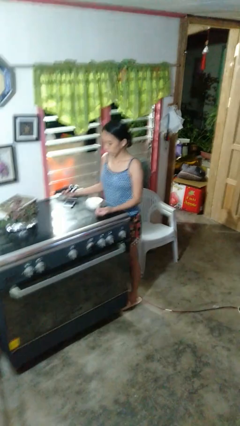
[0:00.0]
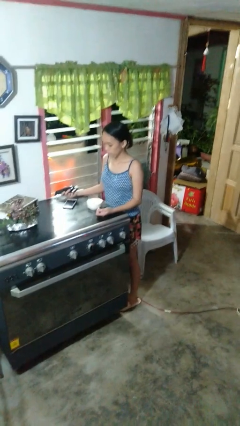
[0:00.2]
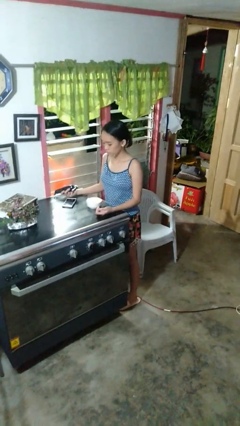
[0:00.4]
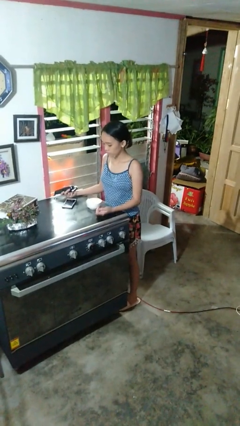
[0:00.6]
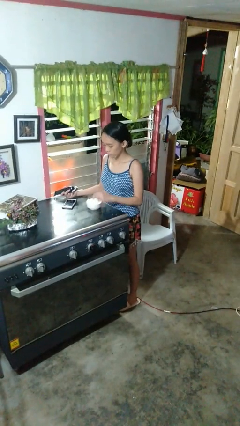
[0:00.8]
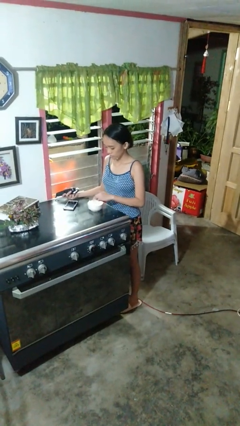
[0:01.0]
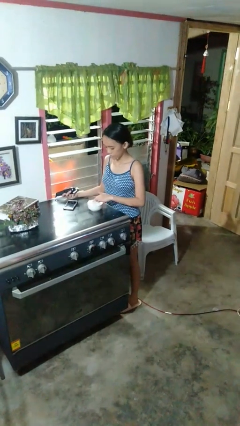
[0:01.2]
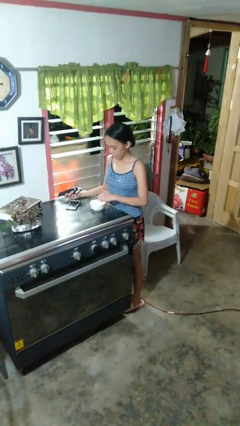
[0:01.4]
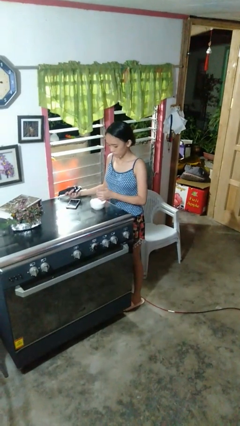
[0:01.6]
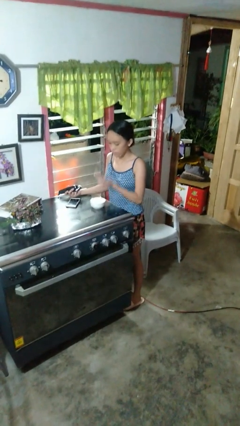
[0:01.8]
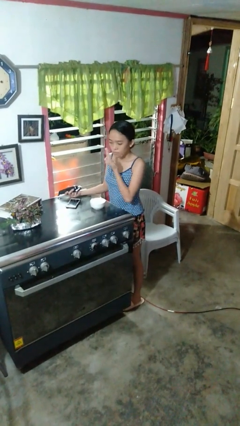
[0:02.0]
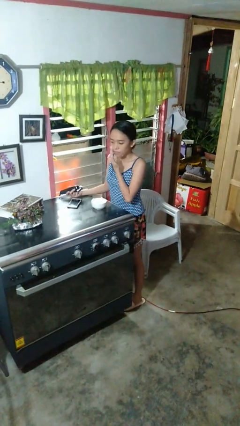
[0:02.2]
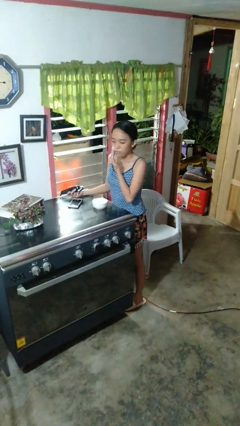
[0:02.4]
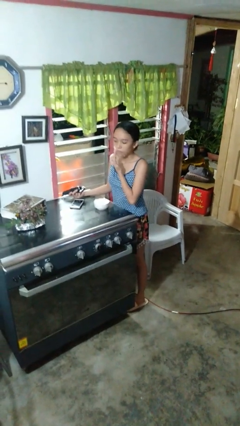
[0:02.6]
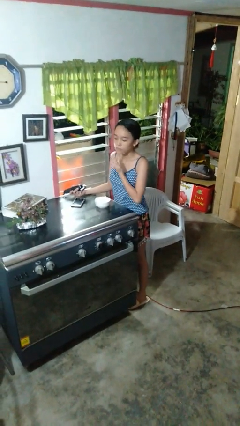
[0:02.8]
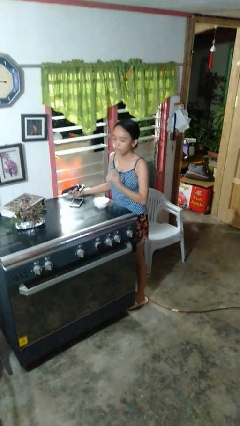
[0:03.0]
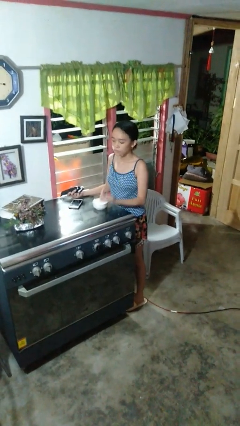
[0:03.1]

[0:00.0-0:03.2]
person applies shaving cream

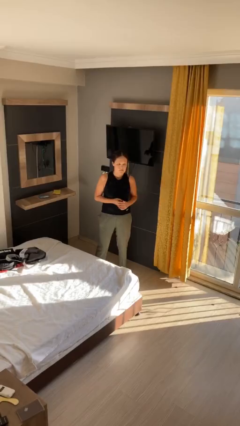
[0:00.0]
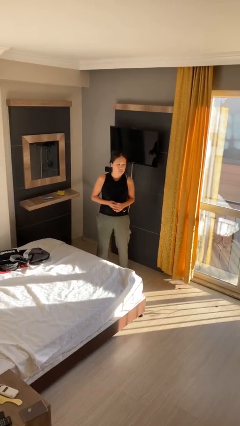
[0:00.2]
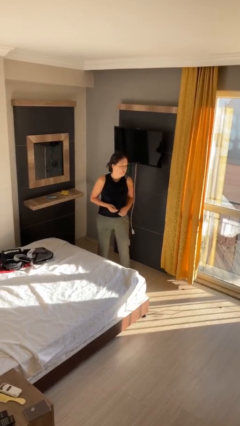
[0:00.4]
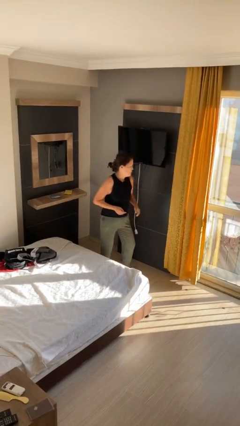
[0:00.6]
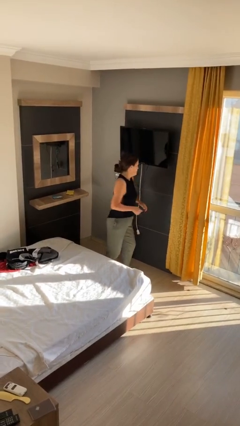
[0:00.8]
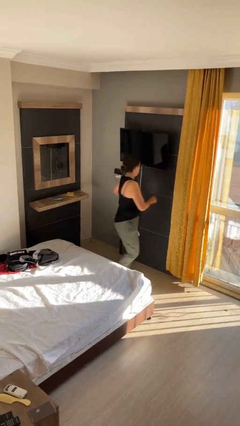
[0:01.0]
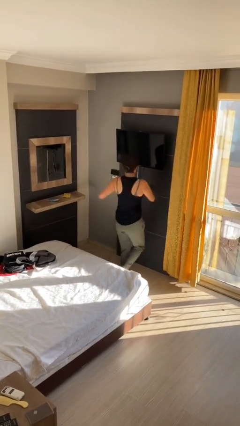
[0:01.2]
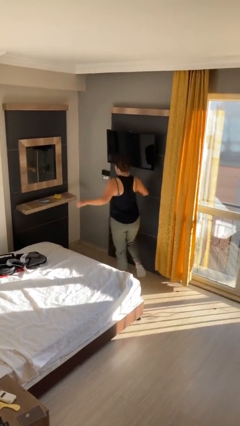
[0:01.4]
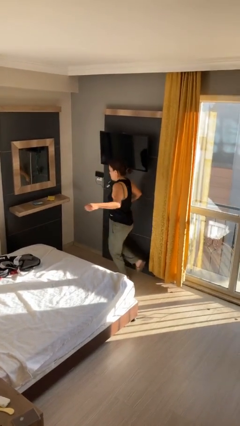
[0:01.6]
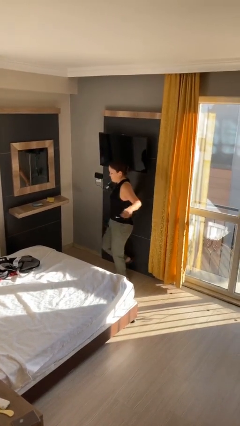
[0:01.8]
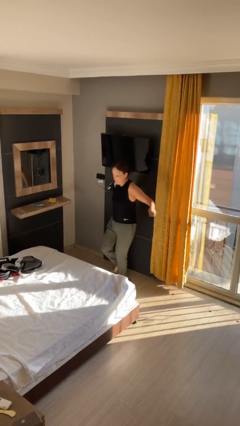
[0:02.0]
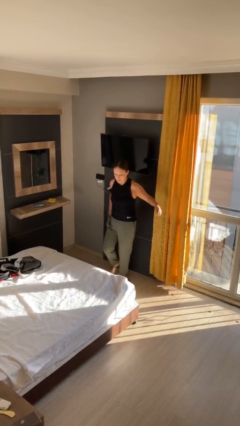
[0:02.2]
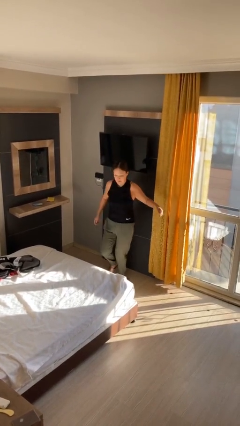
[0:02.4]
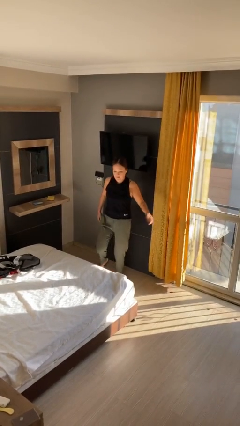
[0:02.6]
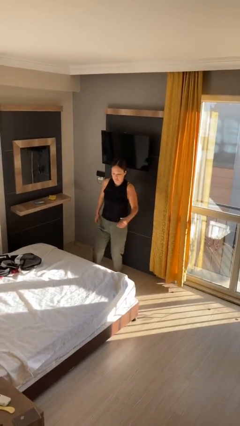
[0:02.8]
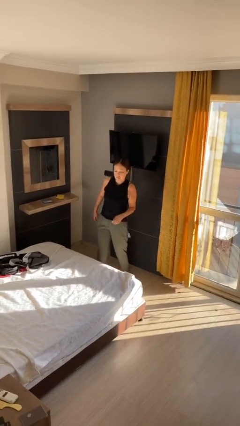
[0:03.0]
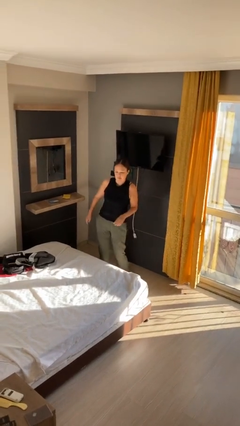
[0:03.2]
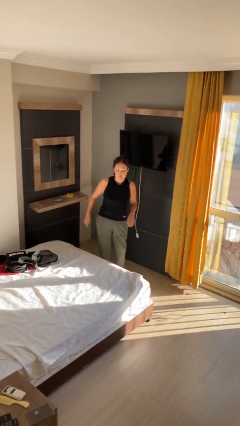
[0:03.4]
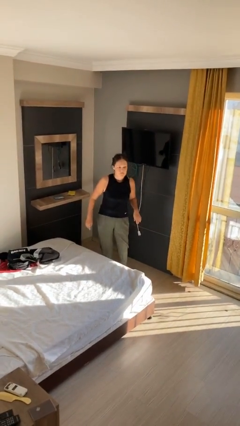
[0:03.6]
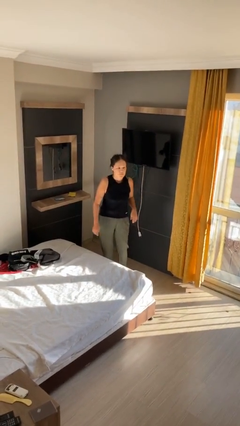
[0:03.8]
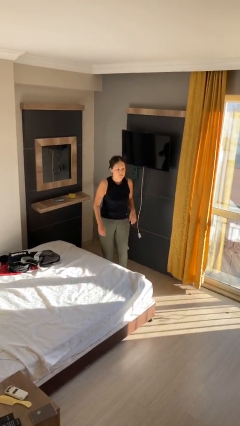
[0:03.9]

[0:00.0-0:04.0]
person twirls

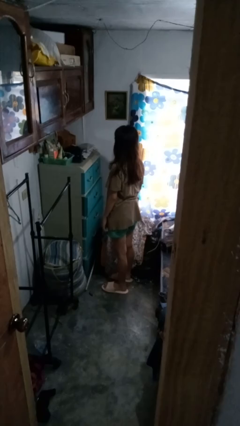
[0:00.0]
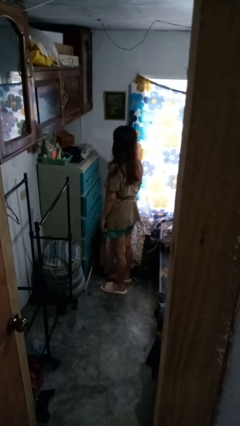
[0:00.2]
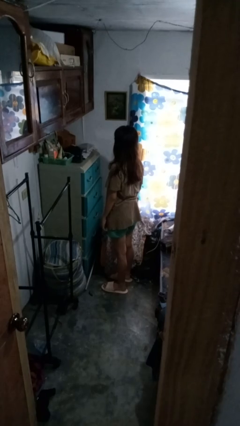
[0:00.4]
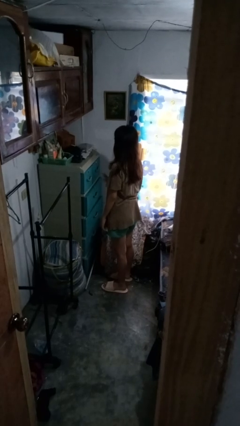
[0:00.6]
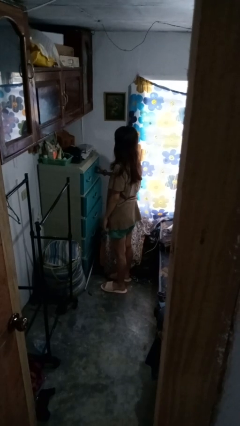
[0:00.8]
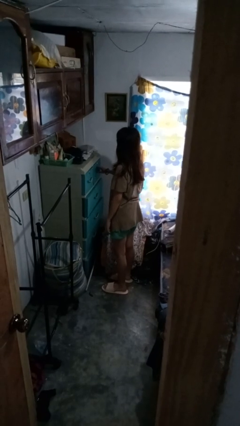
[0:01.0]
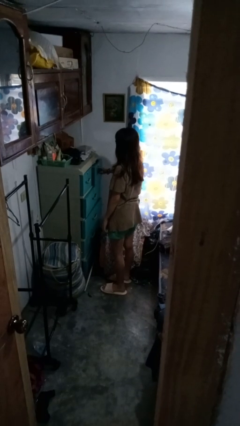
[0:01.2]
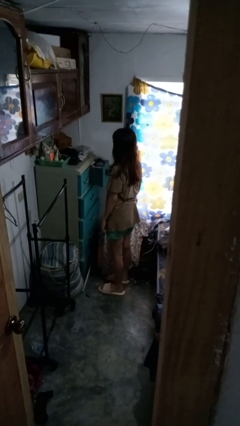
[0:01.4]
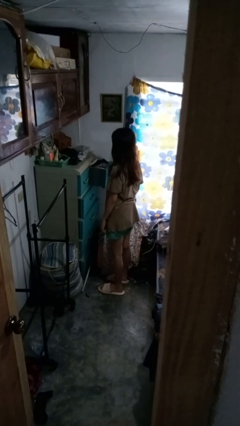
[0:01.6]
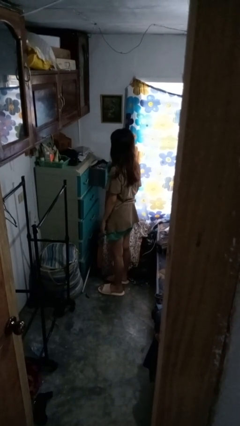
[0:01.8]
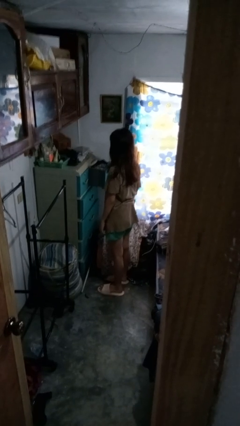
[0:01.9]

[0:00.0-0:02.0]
person opens dresser drawer

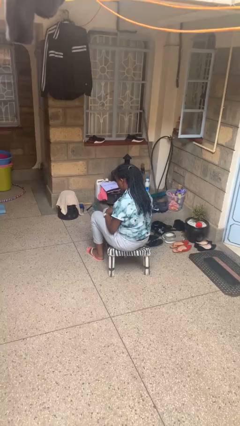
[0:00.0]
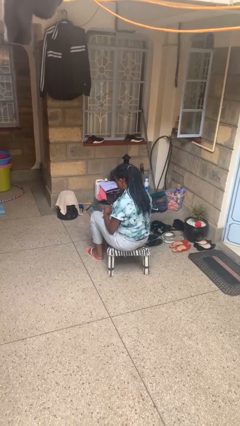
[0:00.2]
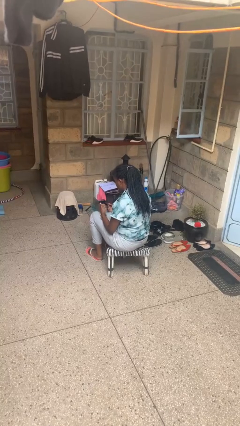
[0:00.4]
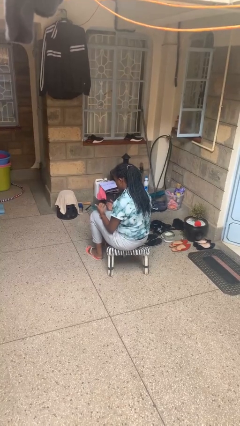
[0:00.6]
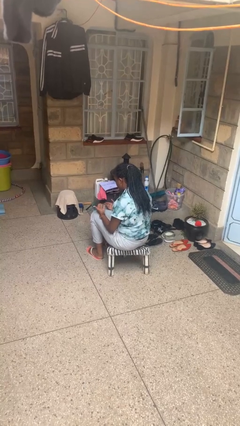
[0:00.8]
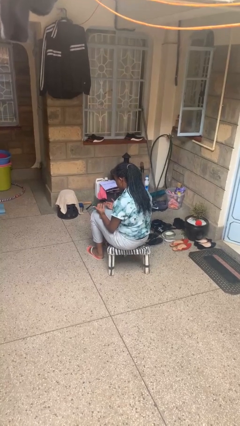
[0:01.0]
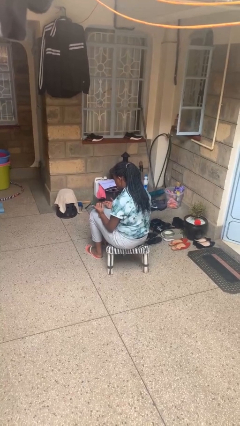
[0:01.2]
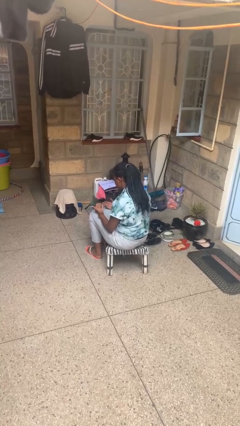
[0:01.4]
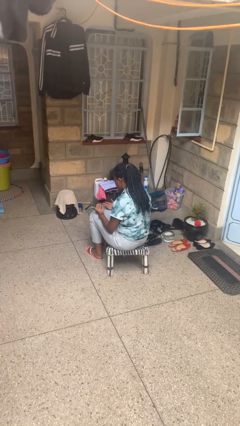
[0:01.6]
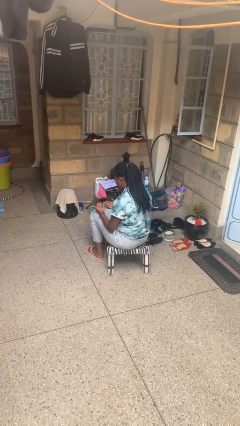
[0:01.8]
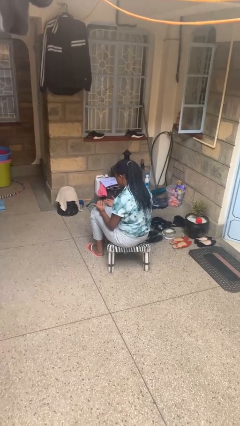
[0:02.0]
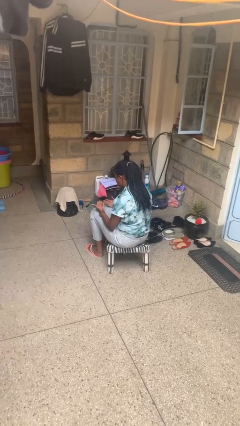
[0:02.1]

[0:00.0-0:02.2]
person looks at hands in lap

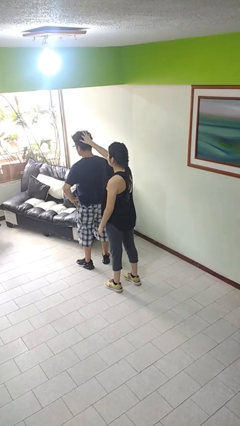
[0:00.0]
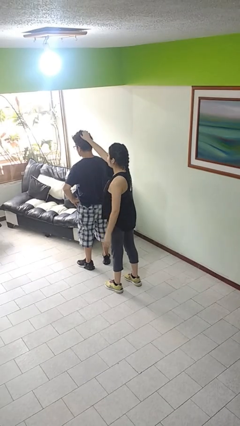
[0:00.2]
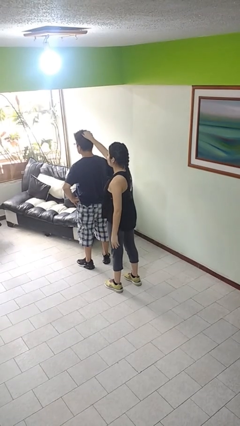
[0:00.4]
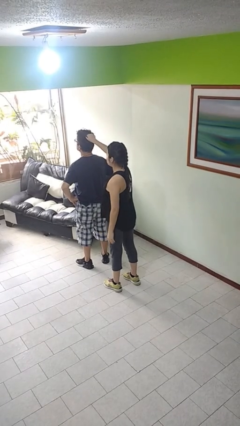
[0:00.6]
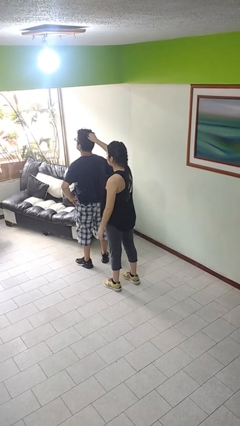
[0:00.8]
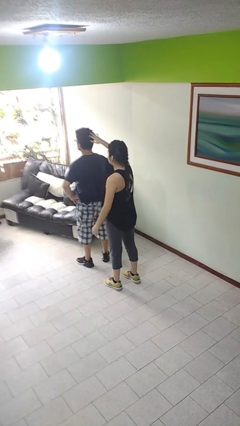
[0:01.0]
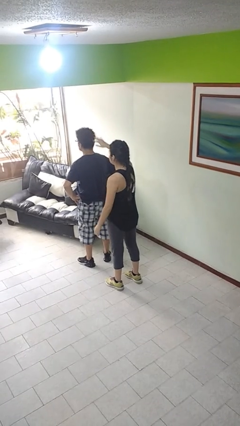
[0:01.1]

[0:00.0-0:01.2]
person grabs person by hair

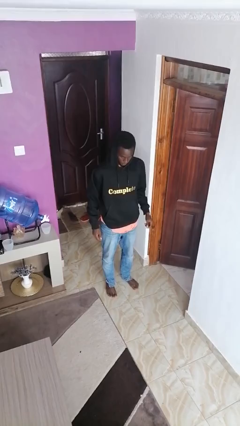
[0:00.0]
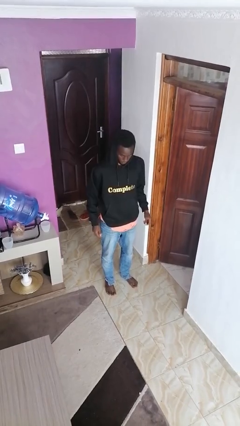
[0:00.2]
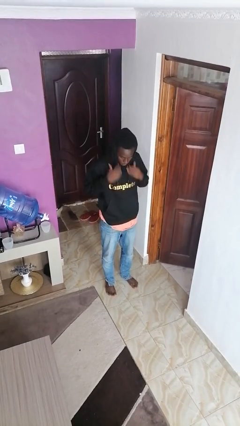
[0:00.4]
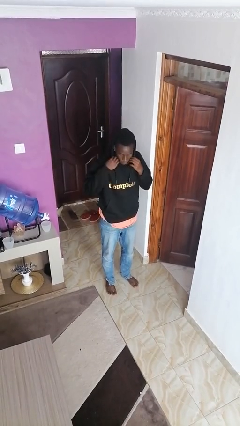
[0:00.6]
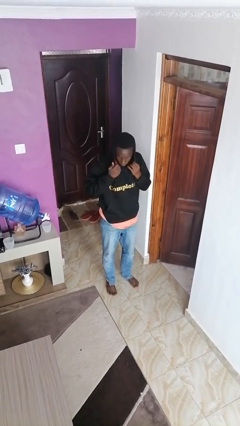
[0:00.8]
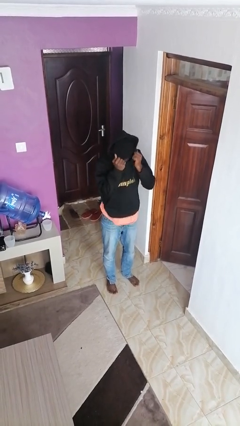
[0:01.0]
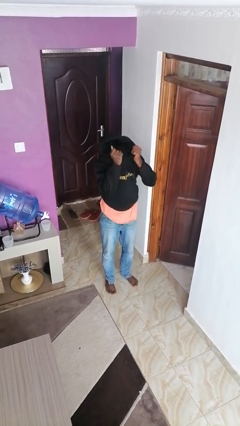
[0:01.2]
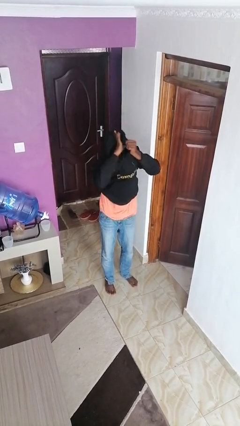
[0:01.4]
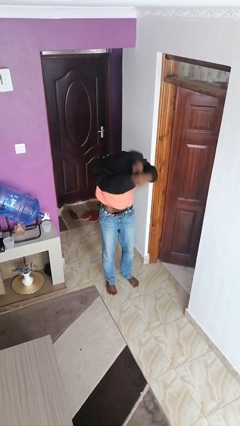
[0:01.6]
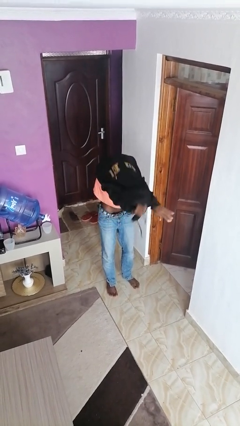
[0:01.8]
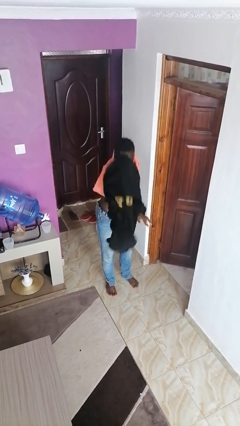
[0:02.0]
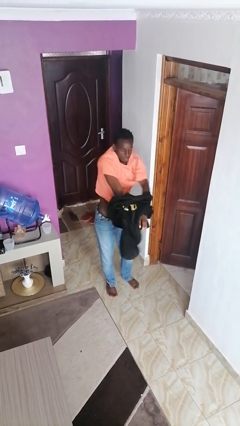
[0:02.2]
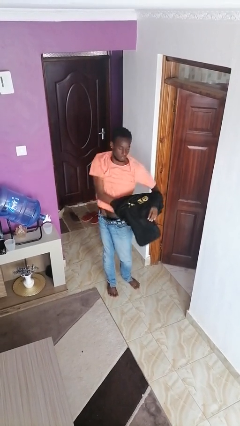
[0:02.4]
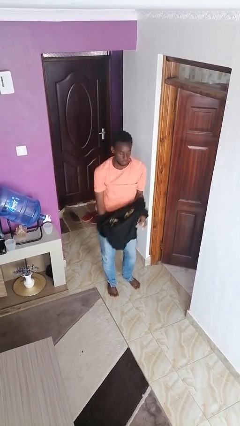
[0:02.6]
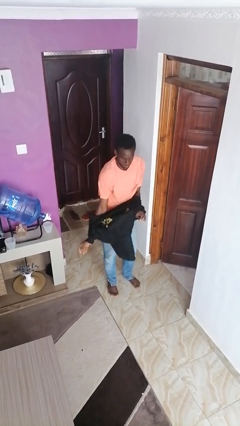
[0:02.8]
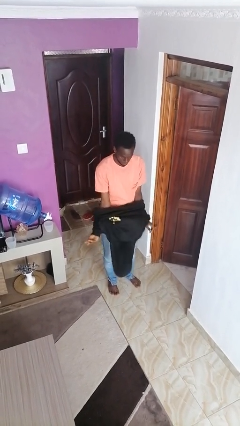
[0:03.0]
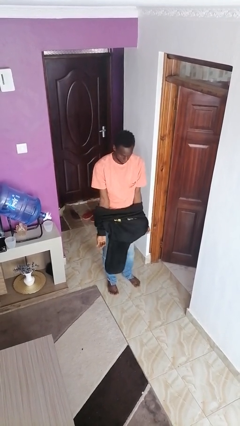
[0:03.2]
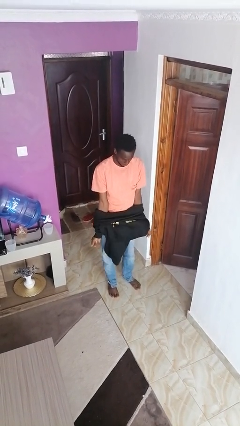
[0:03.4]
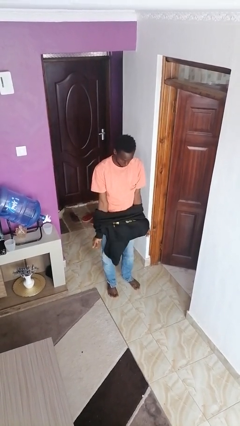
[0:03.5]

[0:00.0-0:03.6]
person takes off hoodie

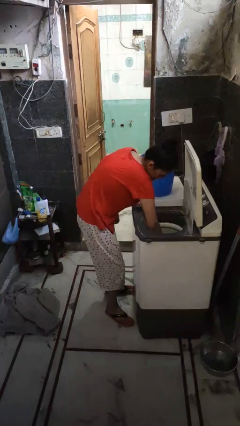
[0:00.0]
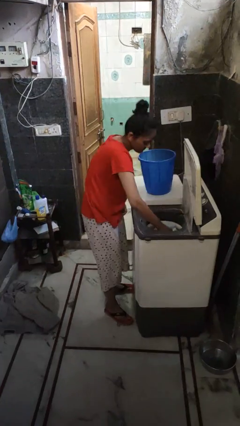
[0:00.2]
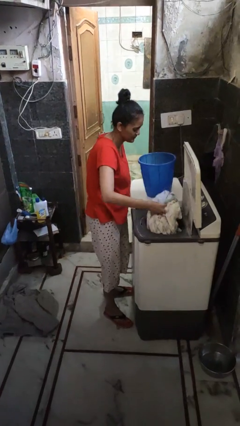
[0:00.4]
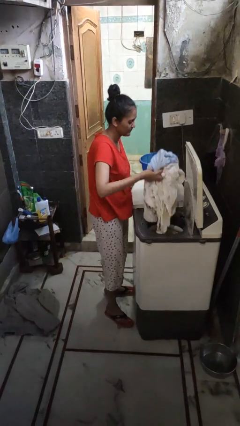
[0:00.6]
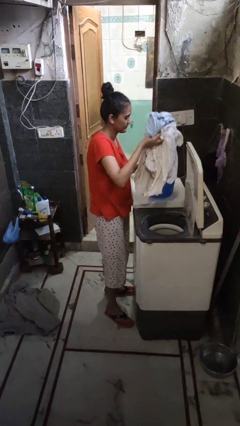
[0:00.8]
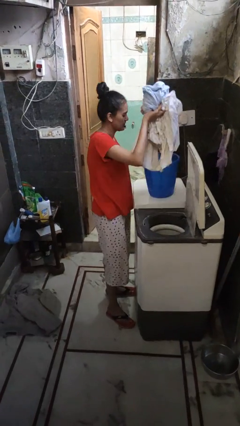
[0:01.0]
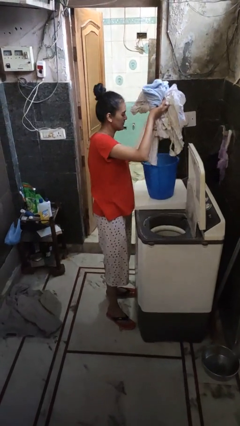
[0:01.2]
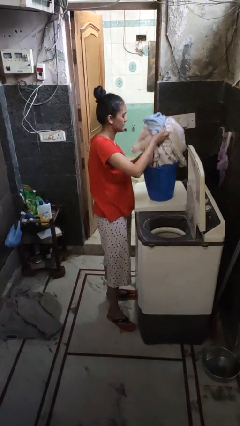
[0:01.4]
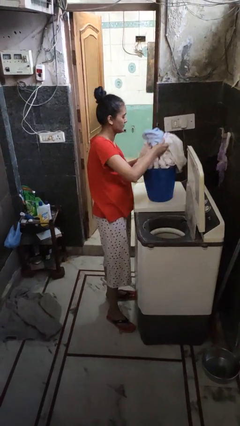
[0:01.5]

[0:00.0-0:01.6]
person unloads clotheswasher
